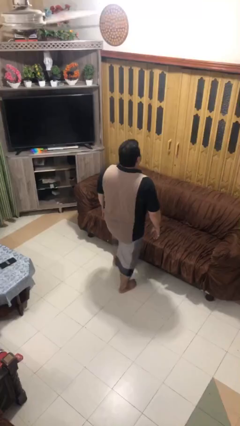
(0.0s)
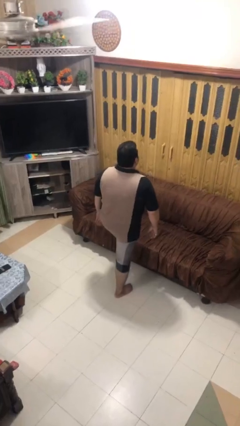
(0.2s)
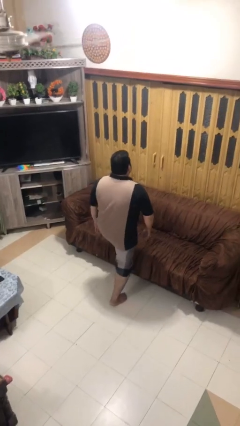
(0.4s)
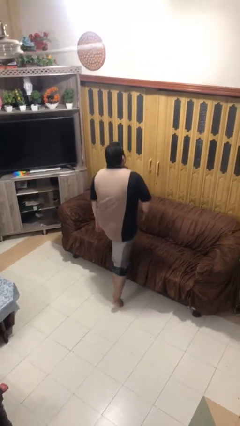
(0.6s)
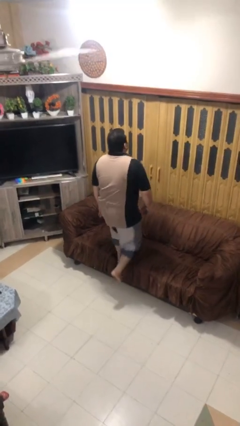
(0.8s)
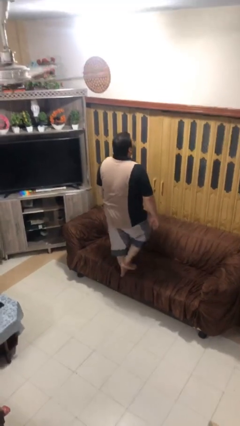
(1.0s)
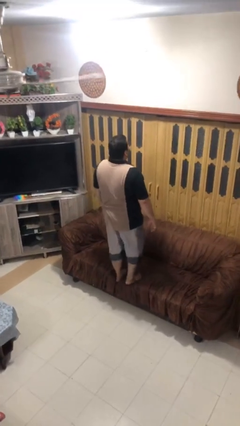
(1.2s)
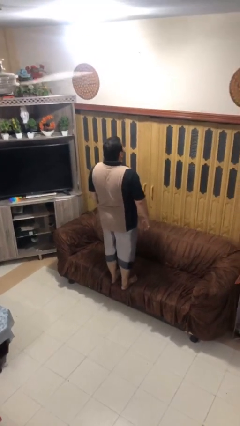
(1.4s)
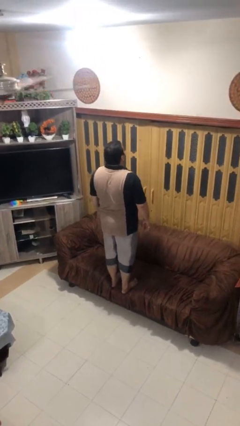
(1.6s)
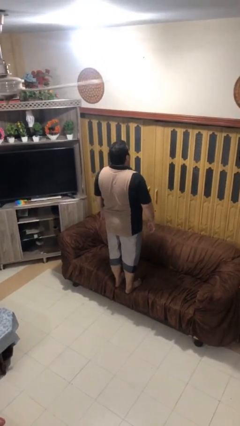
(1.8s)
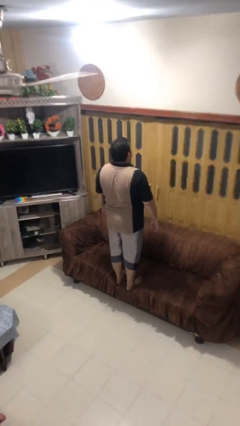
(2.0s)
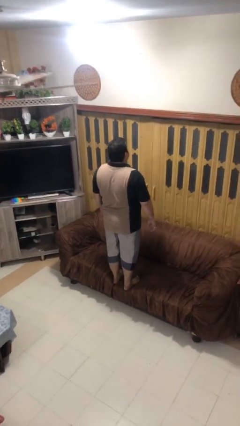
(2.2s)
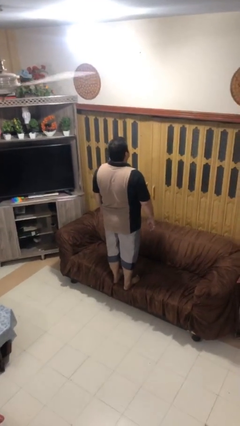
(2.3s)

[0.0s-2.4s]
person climbs on couch

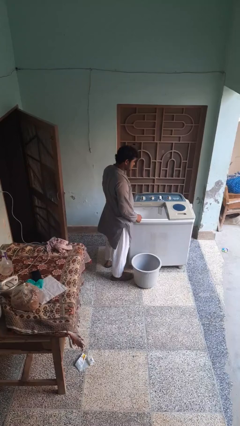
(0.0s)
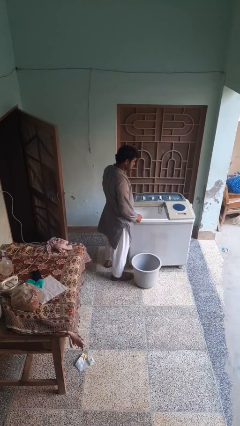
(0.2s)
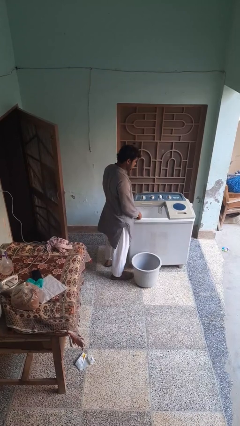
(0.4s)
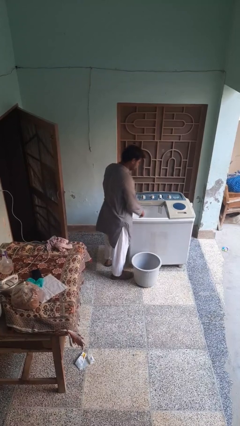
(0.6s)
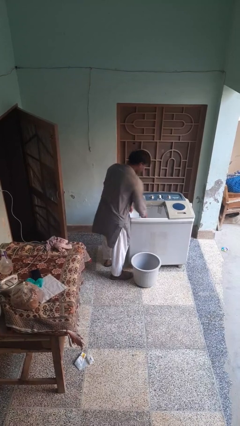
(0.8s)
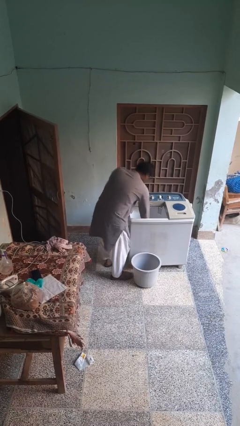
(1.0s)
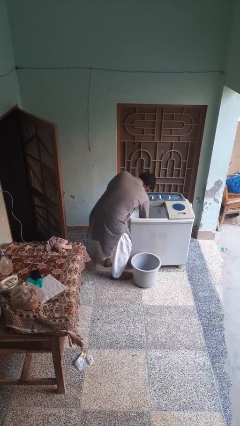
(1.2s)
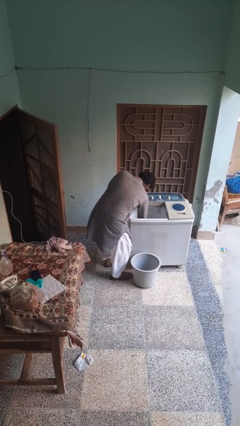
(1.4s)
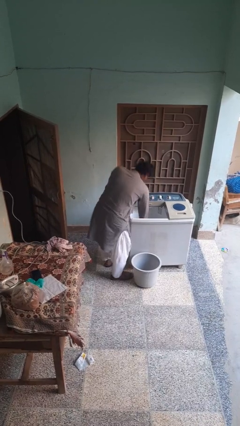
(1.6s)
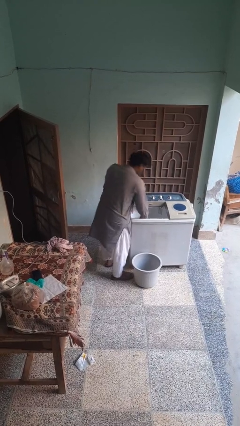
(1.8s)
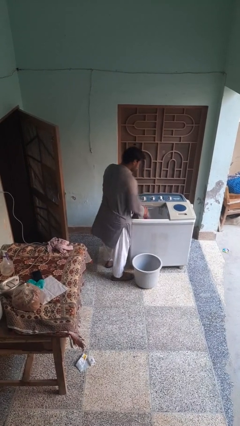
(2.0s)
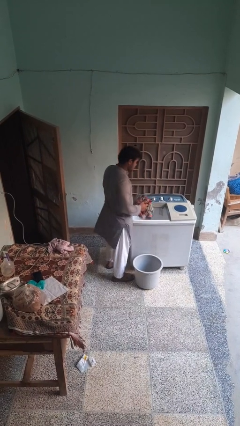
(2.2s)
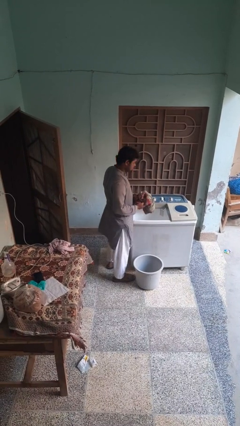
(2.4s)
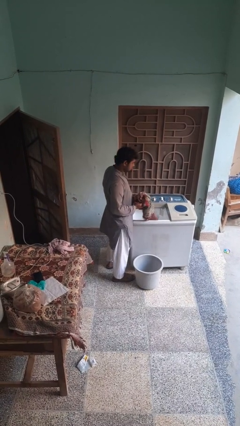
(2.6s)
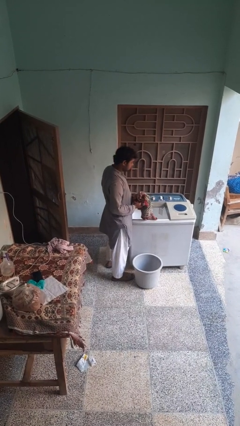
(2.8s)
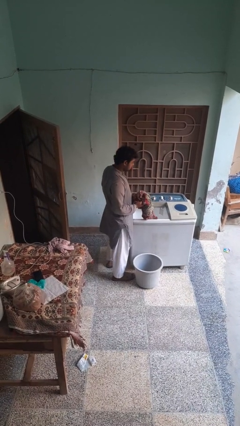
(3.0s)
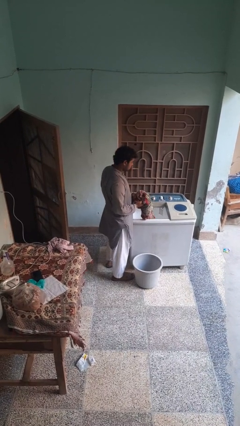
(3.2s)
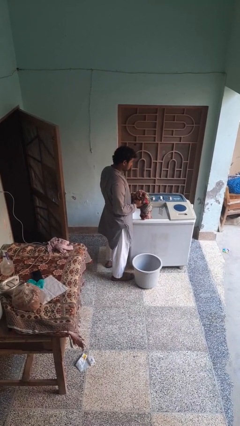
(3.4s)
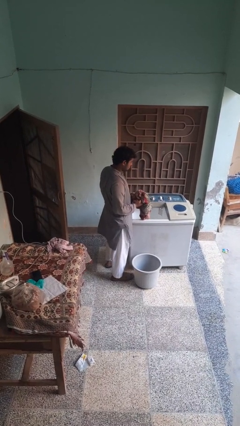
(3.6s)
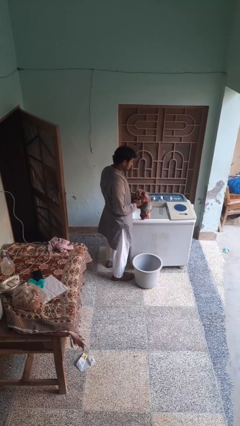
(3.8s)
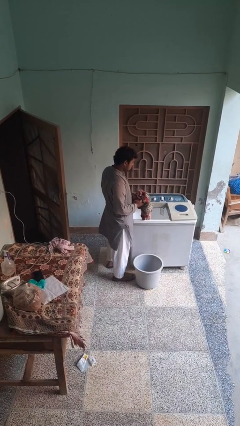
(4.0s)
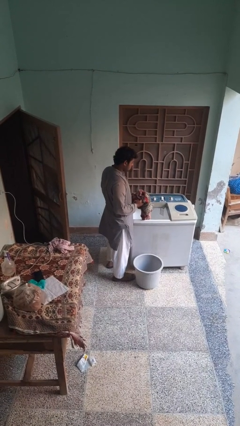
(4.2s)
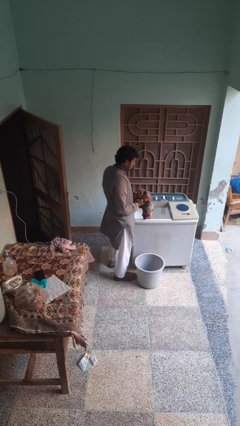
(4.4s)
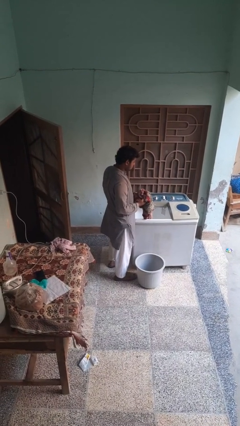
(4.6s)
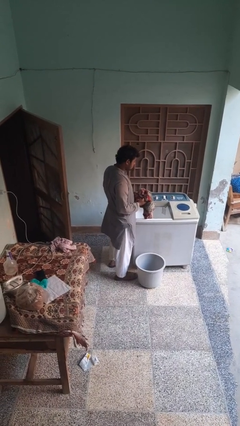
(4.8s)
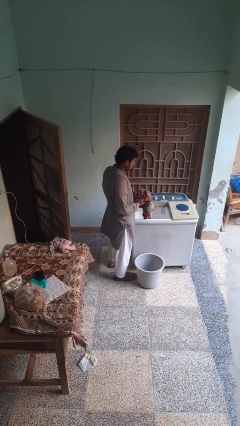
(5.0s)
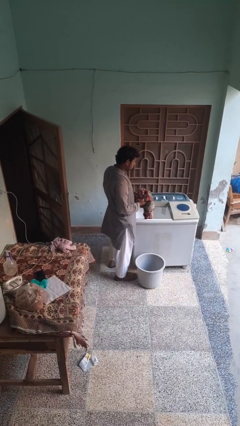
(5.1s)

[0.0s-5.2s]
person unloads clotheswasher

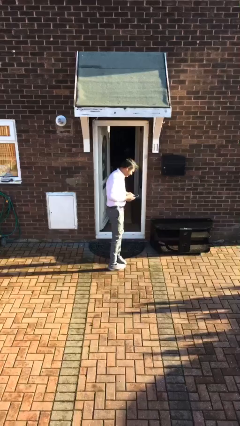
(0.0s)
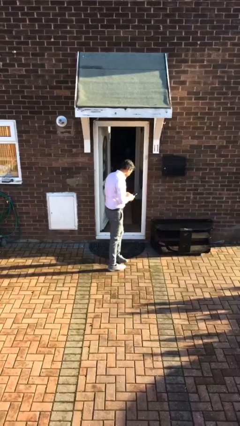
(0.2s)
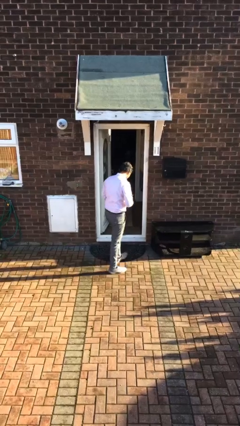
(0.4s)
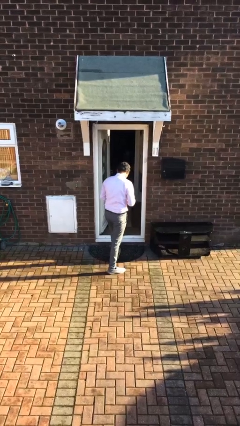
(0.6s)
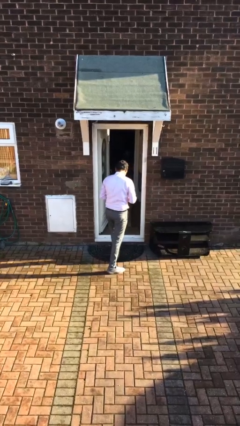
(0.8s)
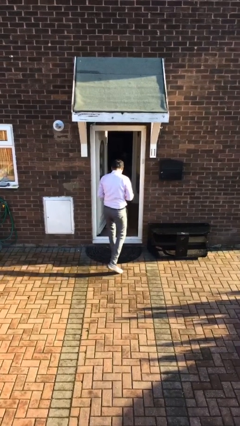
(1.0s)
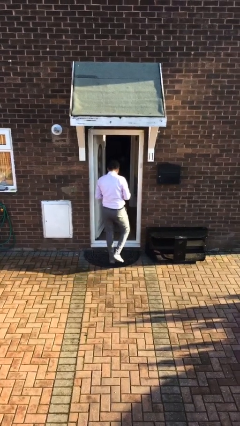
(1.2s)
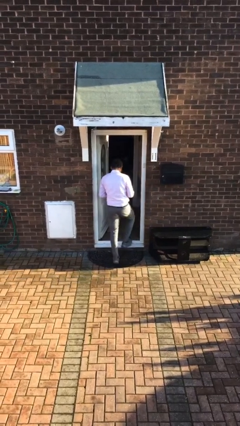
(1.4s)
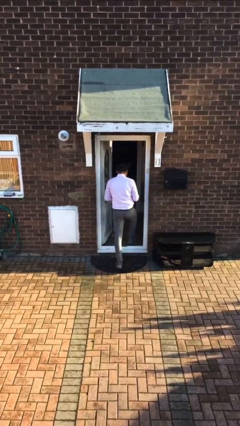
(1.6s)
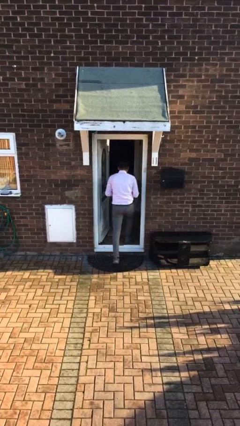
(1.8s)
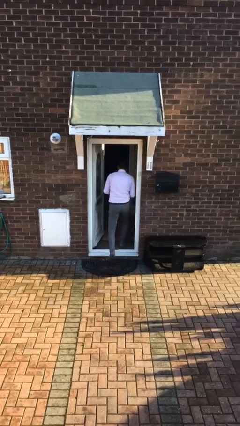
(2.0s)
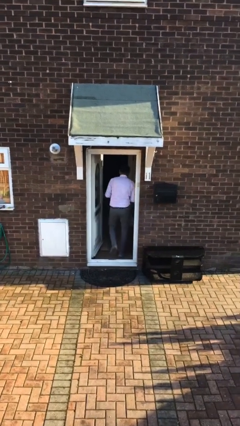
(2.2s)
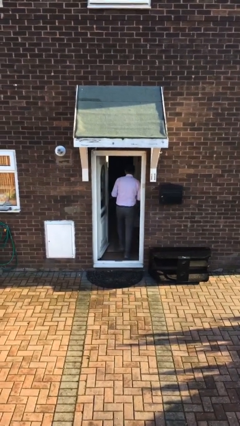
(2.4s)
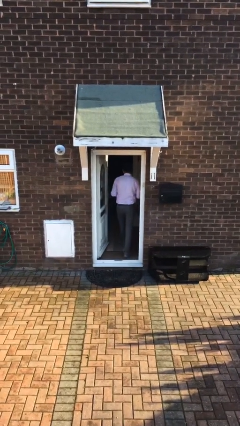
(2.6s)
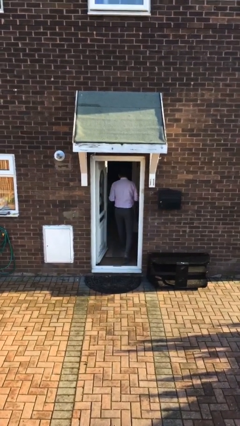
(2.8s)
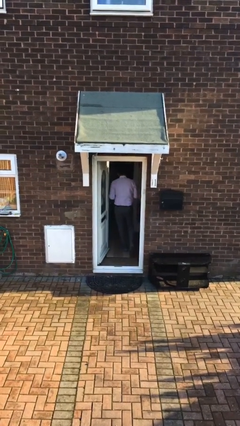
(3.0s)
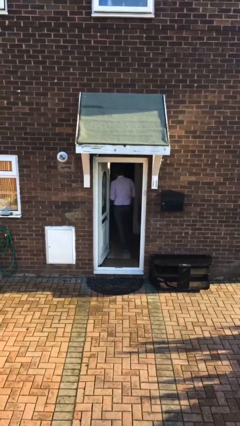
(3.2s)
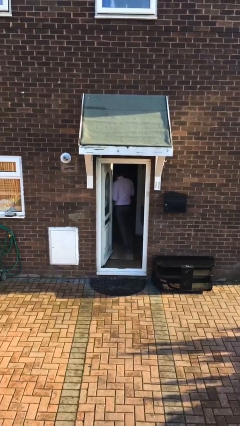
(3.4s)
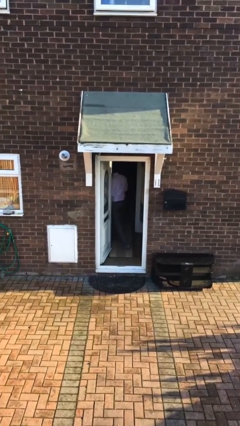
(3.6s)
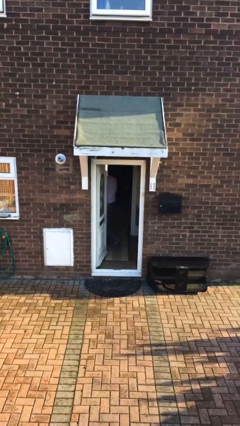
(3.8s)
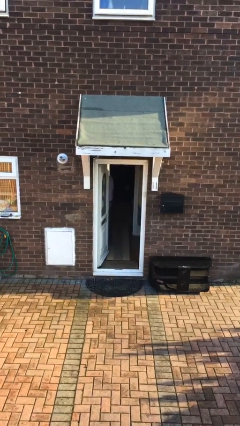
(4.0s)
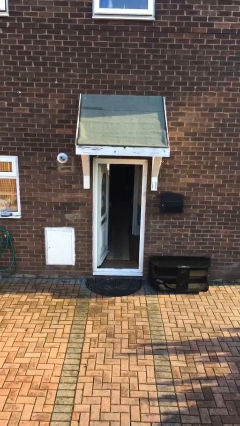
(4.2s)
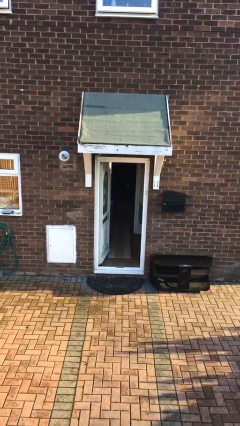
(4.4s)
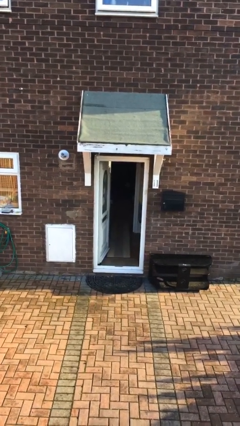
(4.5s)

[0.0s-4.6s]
person exits scene through structure

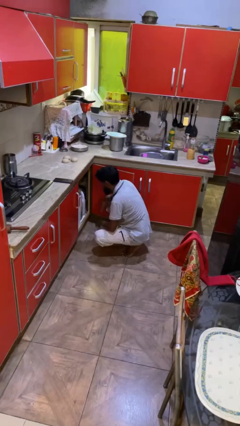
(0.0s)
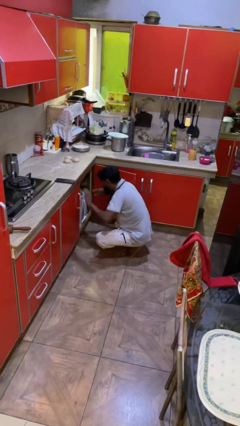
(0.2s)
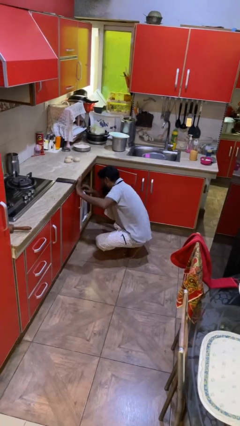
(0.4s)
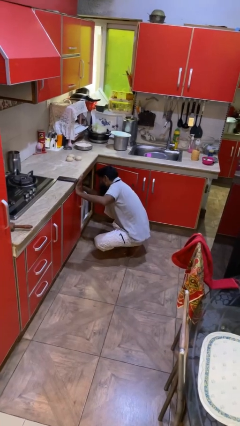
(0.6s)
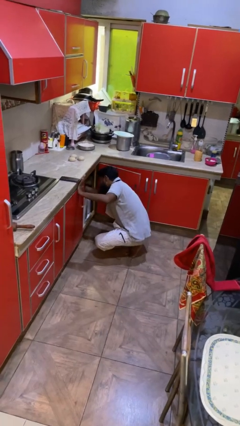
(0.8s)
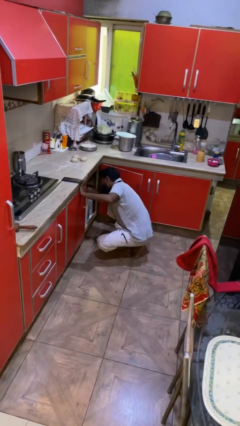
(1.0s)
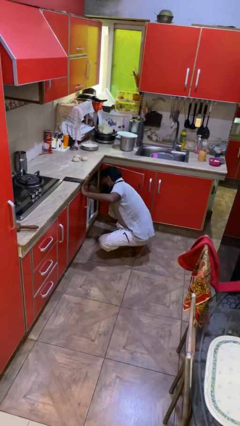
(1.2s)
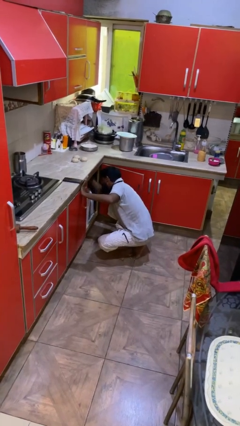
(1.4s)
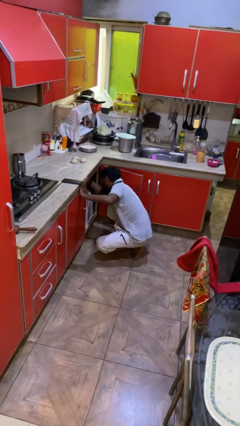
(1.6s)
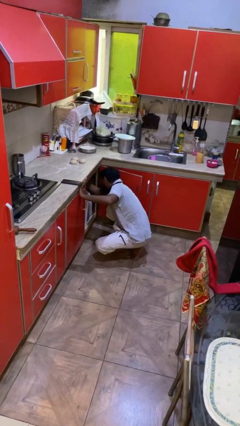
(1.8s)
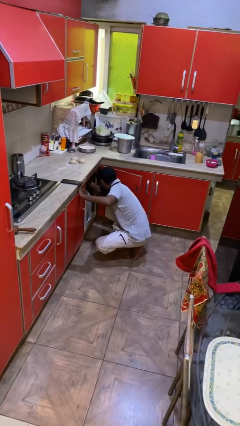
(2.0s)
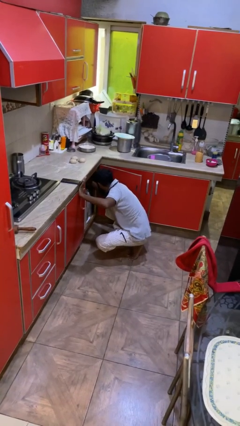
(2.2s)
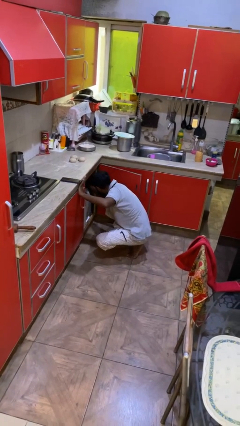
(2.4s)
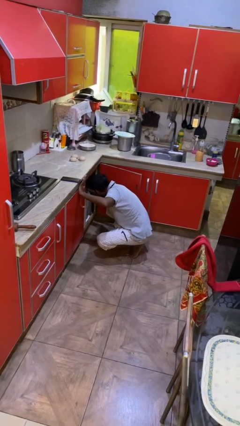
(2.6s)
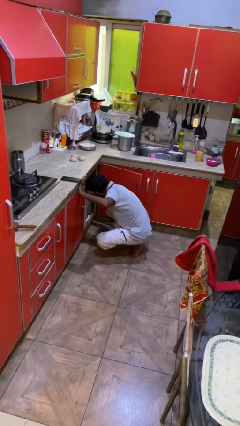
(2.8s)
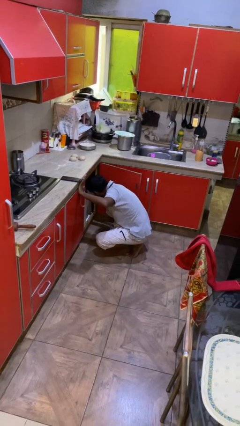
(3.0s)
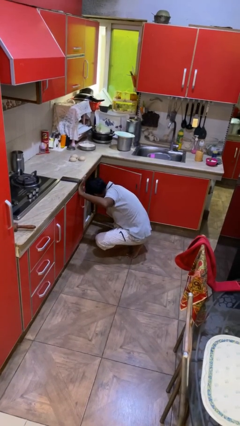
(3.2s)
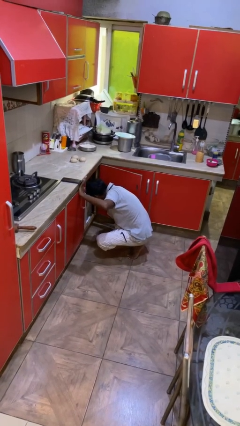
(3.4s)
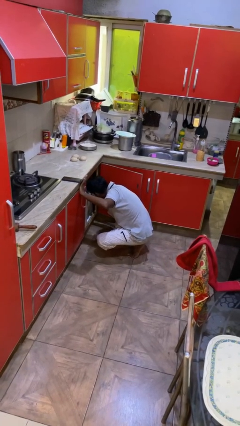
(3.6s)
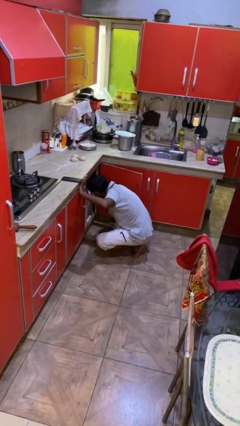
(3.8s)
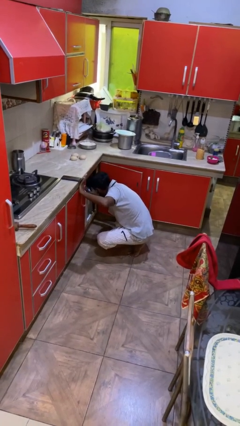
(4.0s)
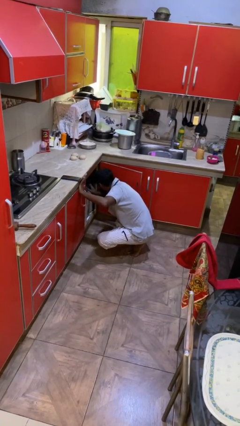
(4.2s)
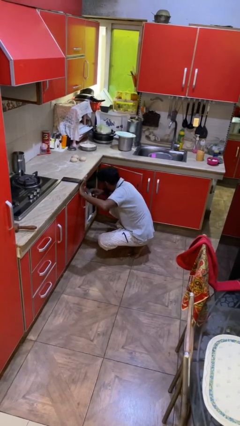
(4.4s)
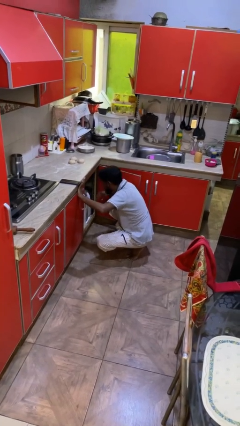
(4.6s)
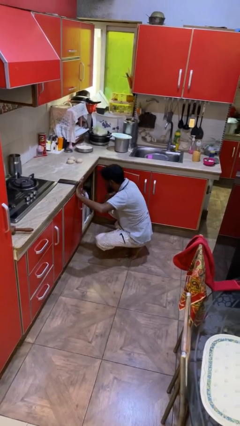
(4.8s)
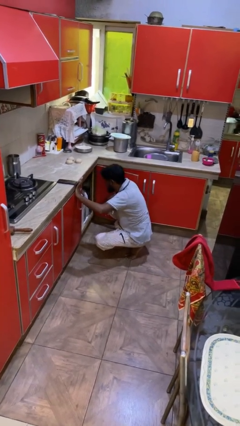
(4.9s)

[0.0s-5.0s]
person searches in cabinet

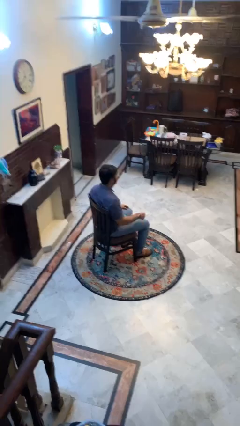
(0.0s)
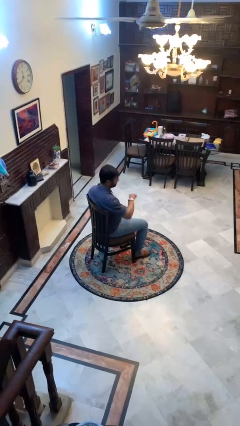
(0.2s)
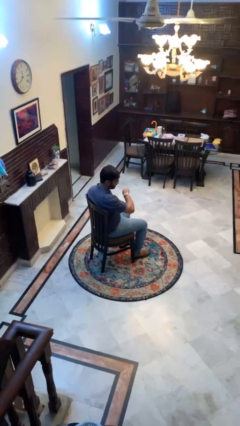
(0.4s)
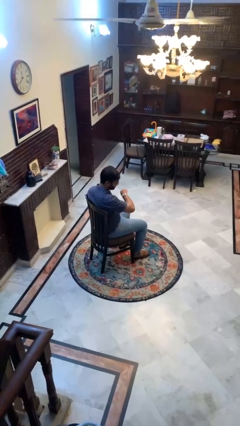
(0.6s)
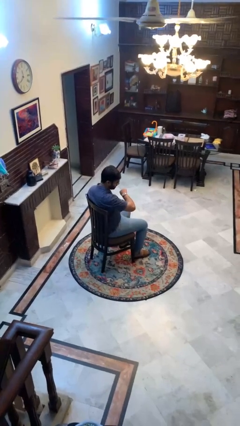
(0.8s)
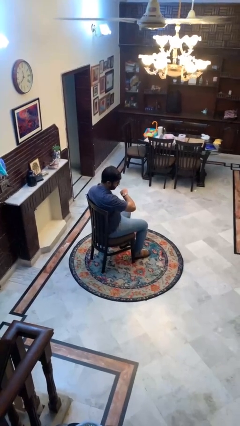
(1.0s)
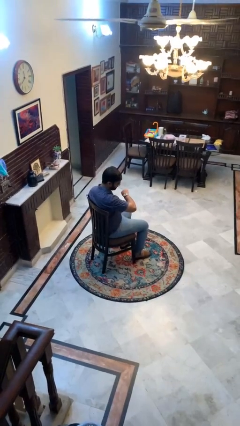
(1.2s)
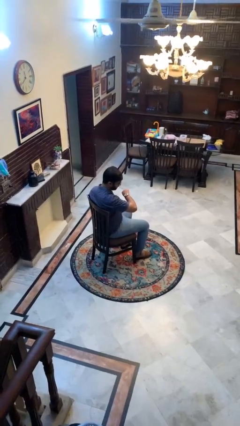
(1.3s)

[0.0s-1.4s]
person looks at wristwatch
